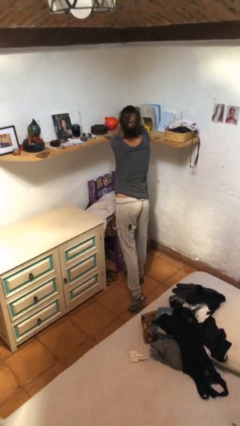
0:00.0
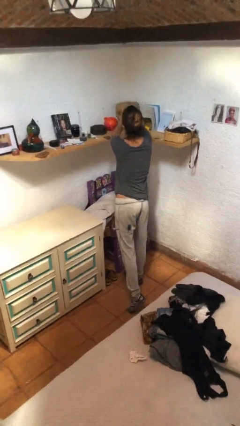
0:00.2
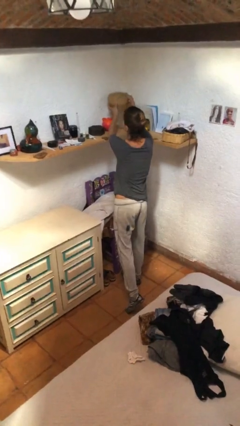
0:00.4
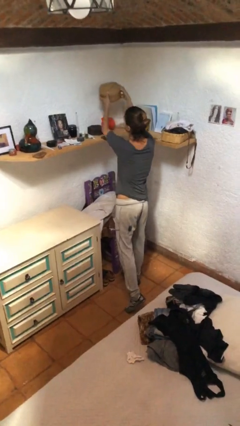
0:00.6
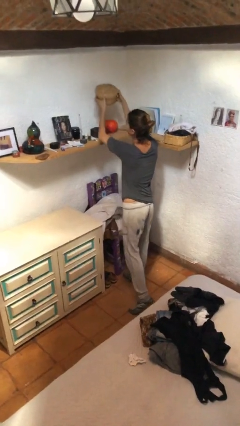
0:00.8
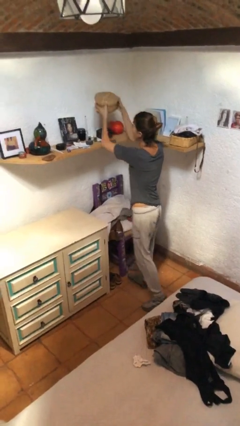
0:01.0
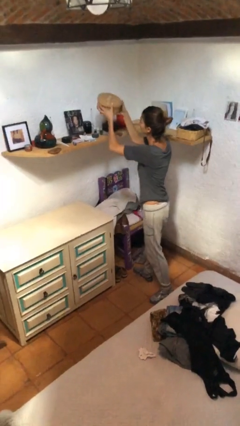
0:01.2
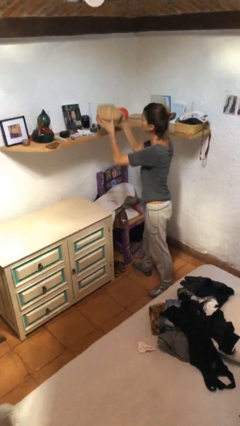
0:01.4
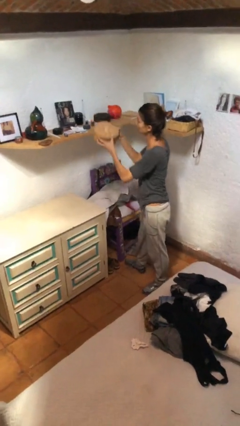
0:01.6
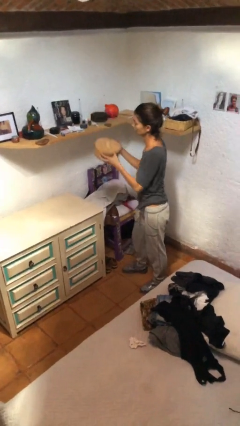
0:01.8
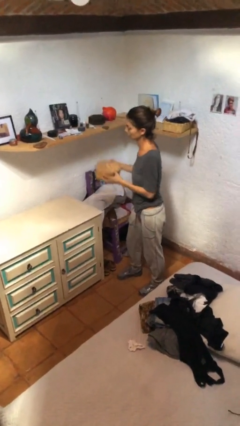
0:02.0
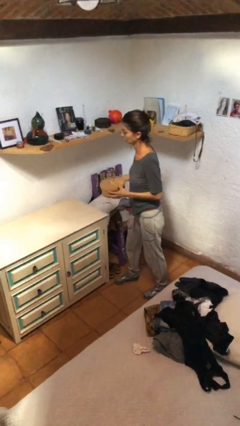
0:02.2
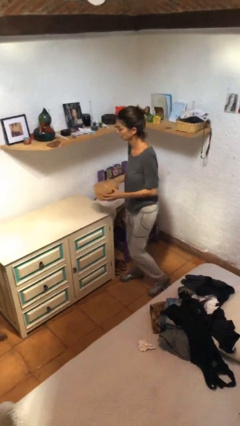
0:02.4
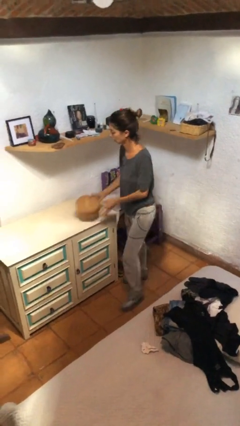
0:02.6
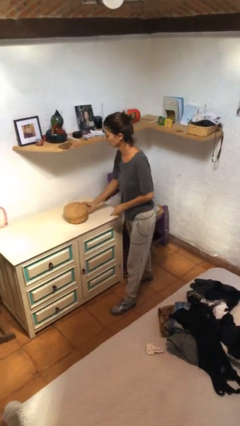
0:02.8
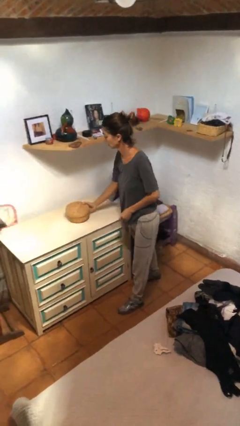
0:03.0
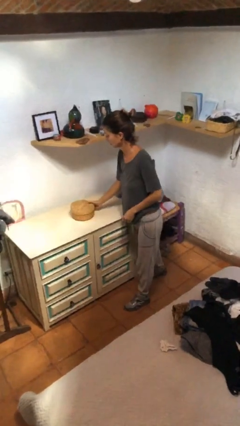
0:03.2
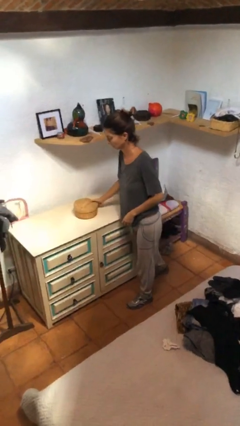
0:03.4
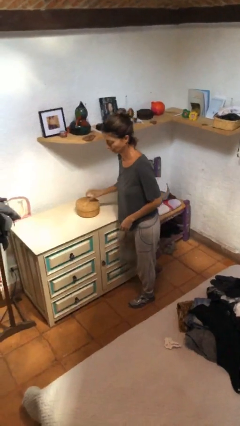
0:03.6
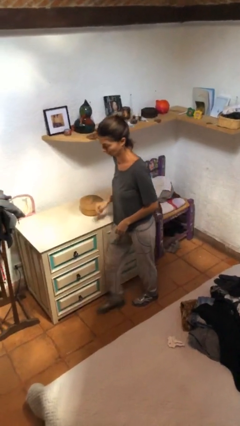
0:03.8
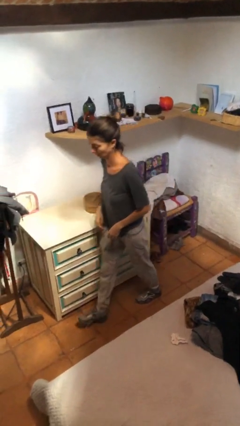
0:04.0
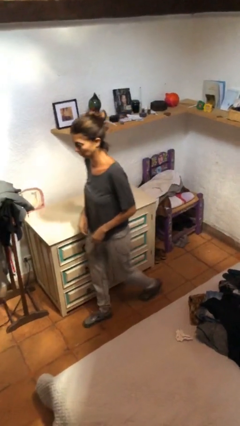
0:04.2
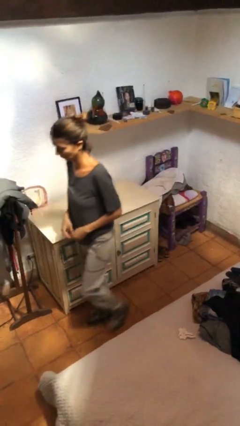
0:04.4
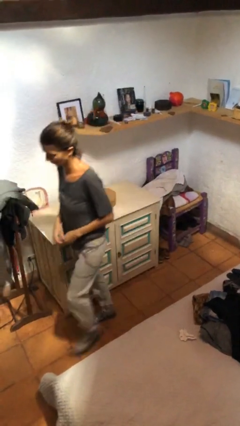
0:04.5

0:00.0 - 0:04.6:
person puts down object on table

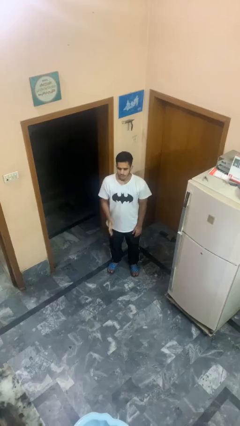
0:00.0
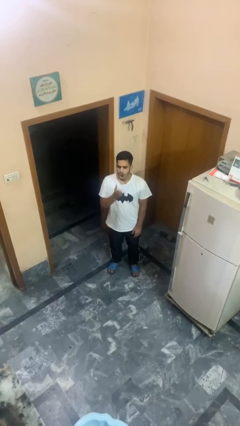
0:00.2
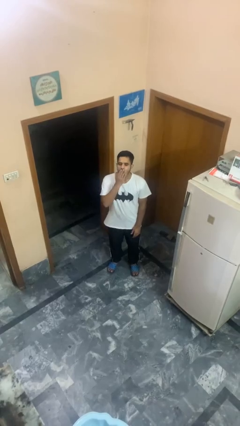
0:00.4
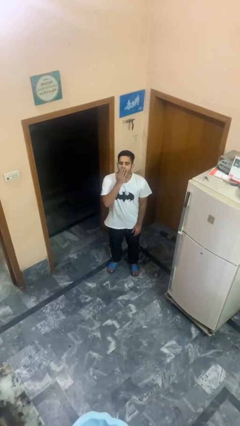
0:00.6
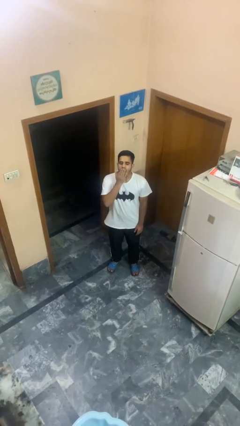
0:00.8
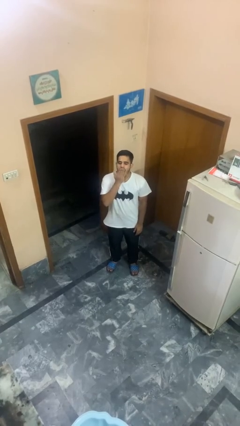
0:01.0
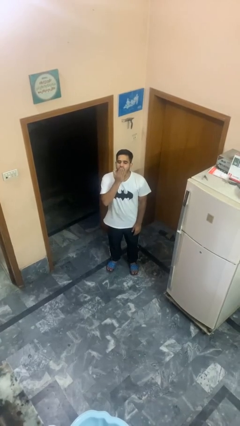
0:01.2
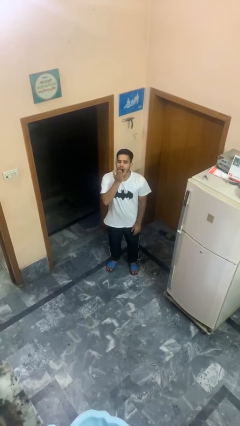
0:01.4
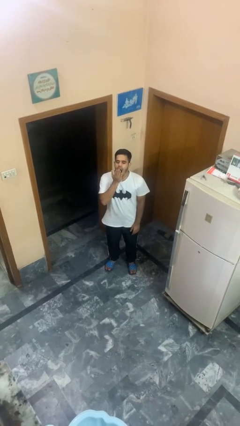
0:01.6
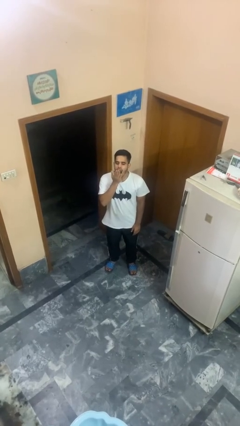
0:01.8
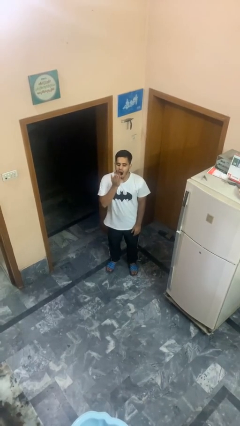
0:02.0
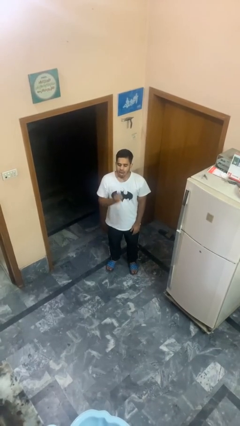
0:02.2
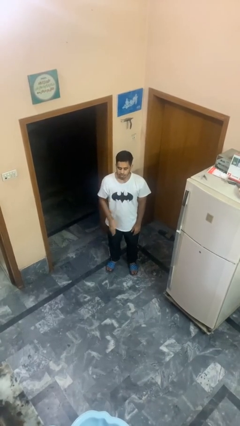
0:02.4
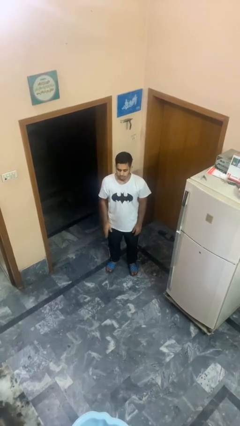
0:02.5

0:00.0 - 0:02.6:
person yawns

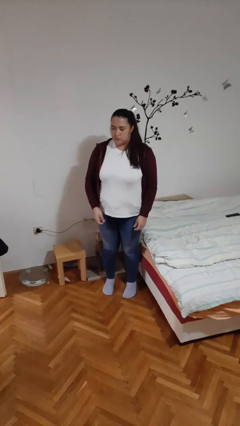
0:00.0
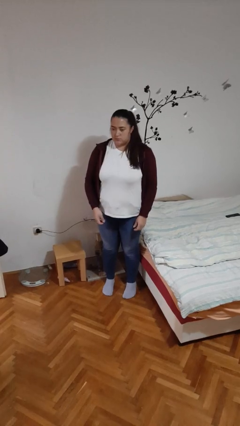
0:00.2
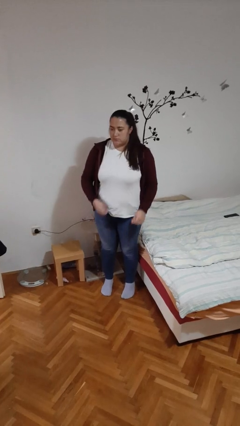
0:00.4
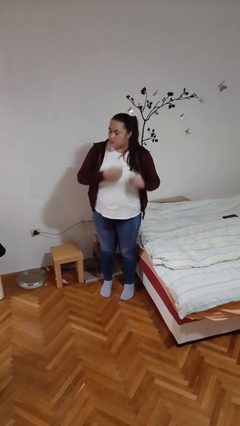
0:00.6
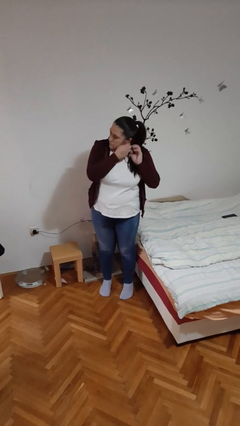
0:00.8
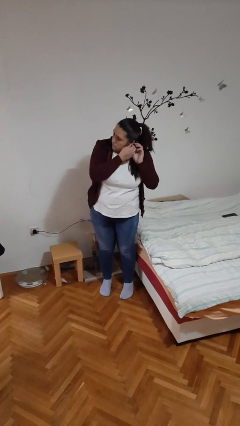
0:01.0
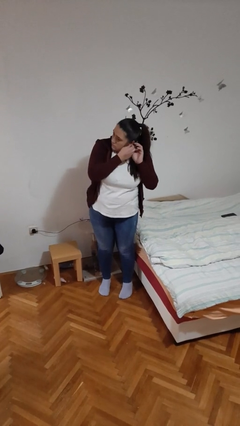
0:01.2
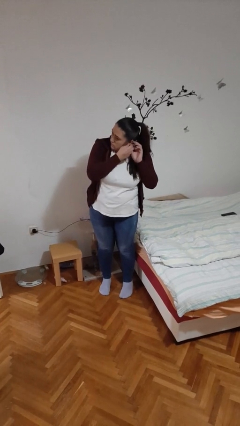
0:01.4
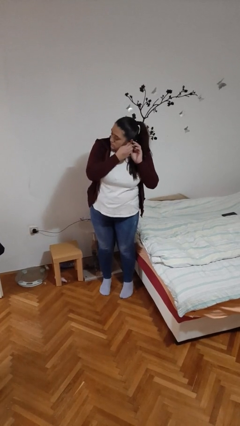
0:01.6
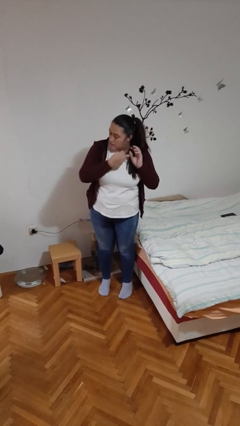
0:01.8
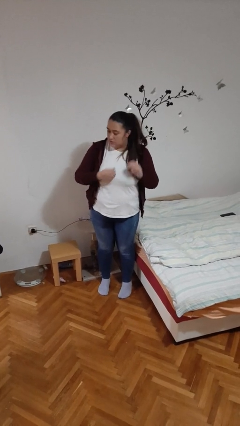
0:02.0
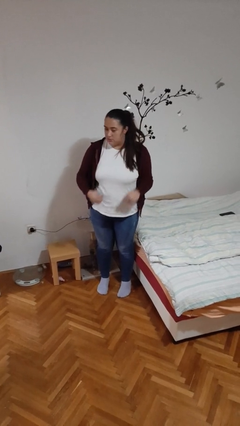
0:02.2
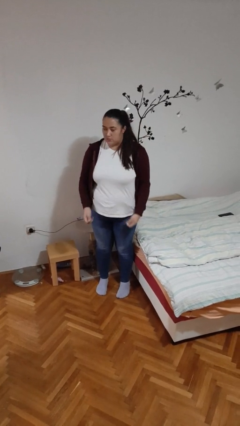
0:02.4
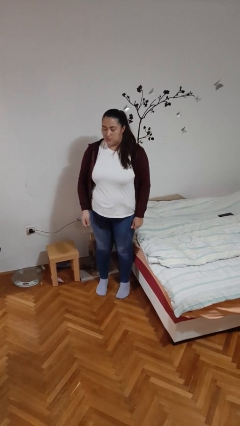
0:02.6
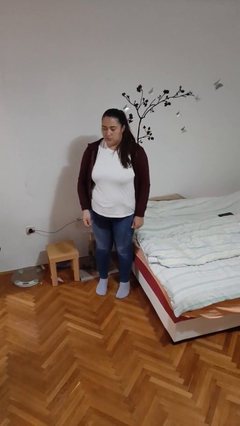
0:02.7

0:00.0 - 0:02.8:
person takes off earrings

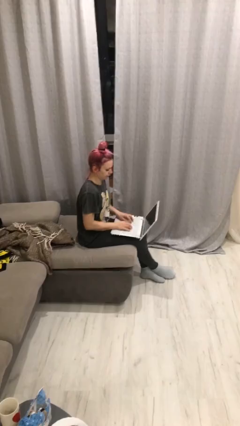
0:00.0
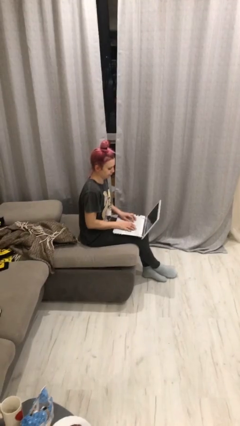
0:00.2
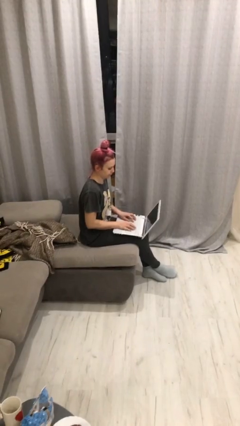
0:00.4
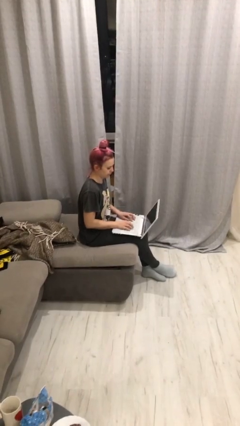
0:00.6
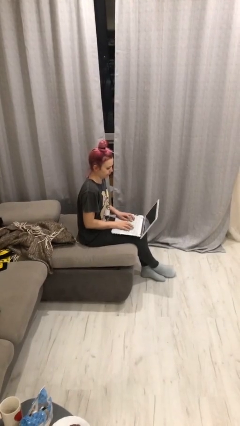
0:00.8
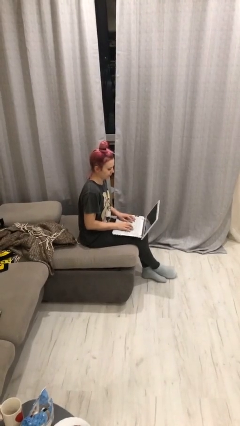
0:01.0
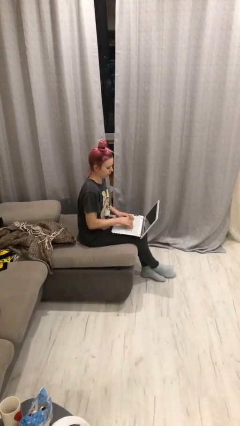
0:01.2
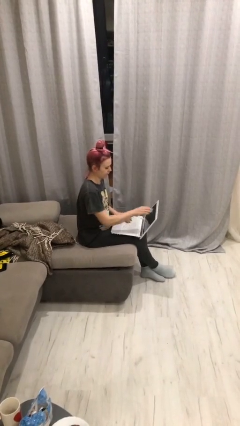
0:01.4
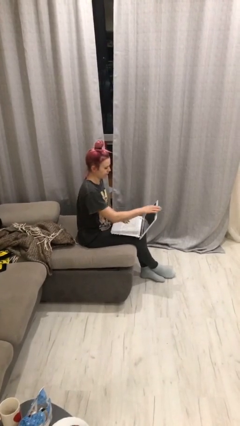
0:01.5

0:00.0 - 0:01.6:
person interacts with laptop

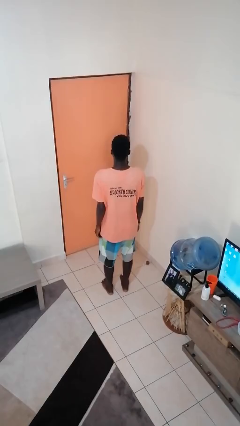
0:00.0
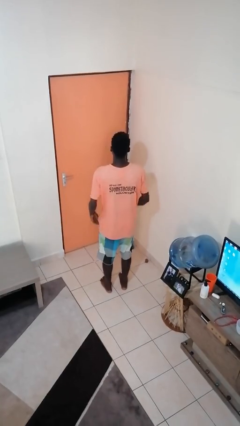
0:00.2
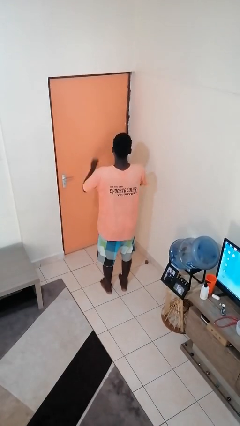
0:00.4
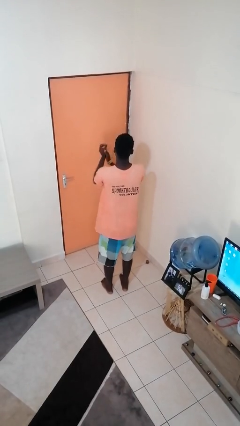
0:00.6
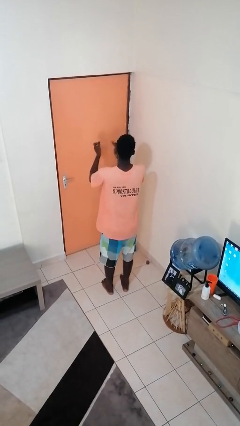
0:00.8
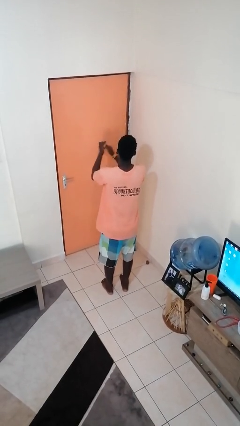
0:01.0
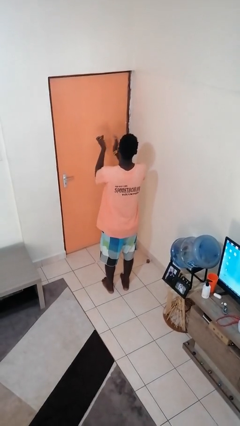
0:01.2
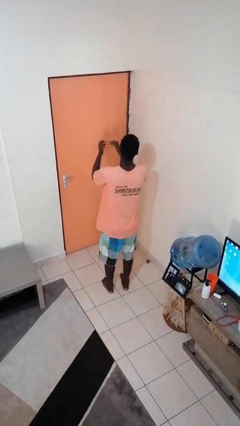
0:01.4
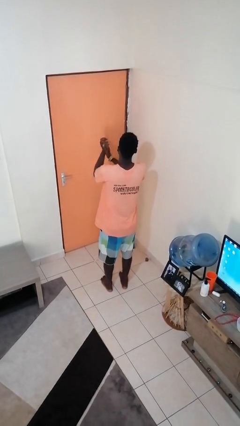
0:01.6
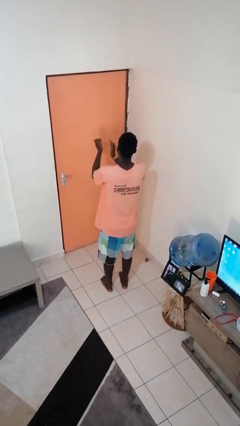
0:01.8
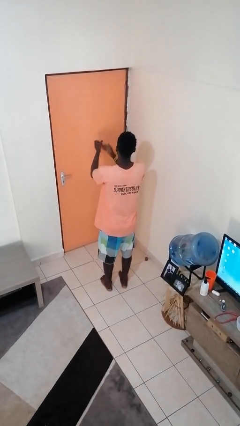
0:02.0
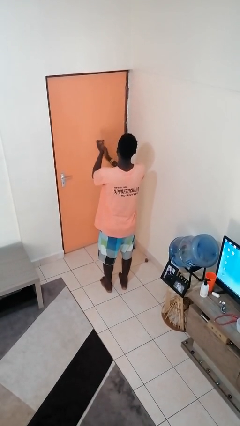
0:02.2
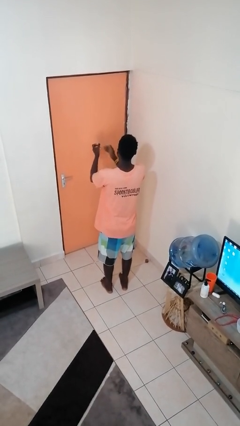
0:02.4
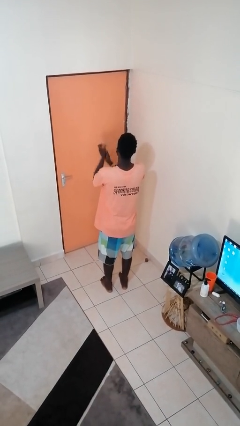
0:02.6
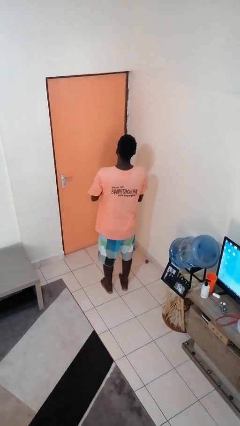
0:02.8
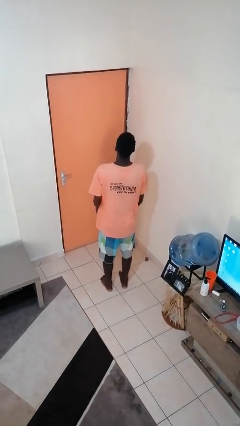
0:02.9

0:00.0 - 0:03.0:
person claps hands

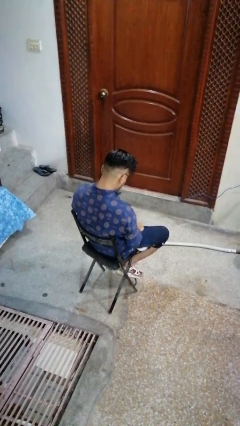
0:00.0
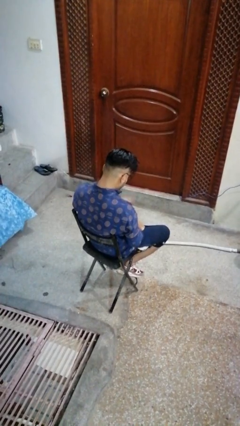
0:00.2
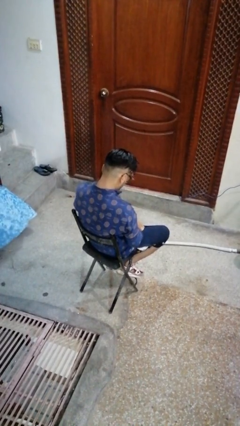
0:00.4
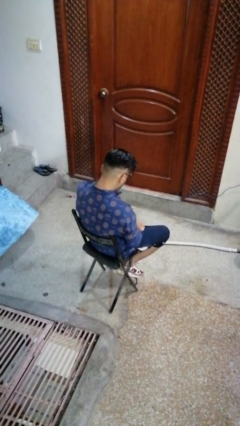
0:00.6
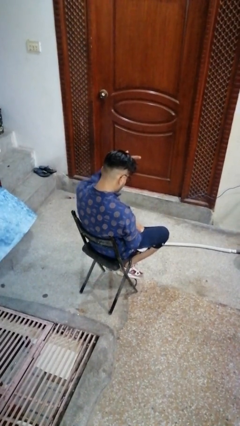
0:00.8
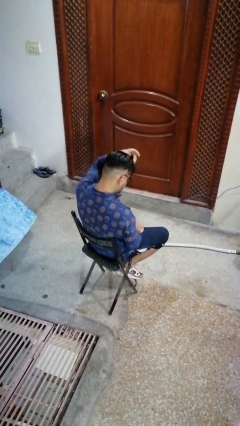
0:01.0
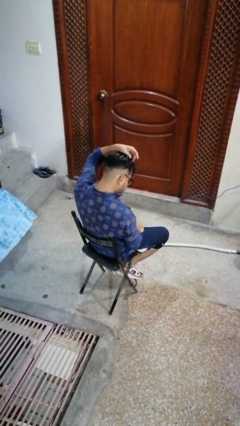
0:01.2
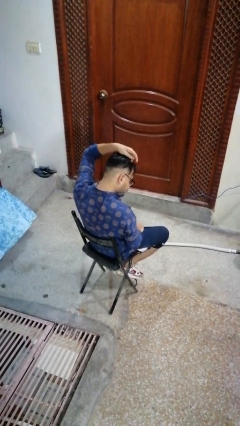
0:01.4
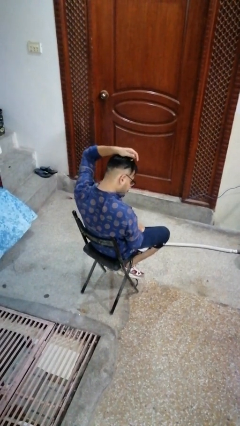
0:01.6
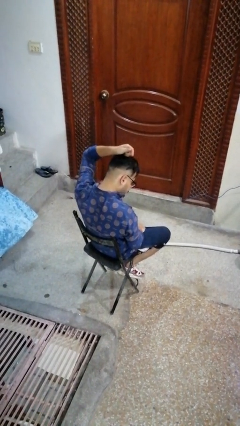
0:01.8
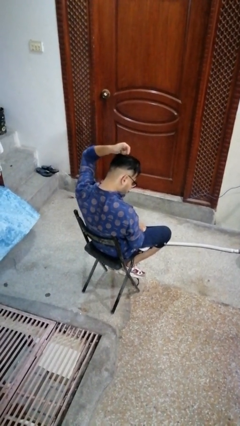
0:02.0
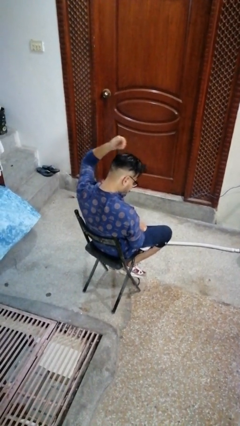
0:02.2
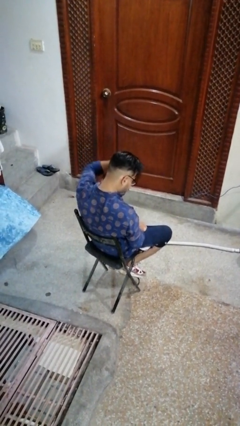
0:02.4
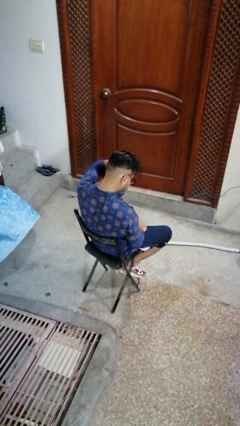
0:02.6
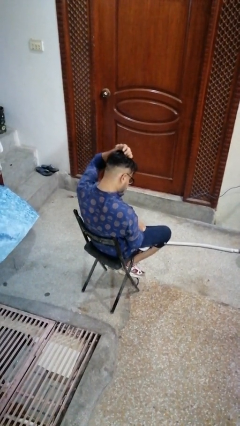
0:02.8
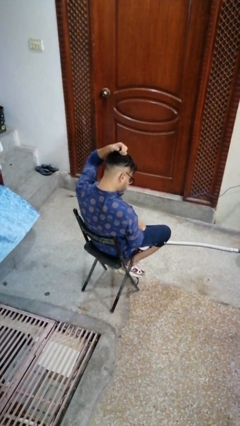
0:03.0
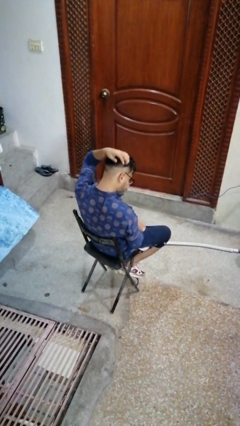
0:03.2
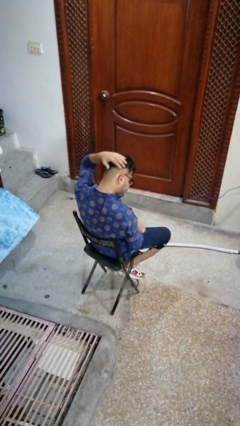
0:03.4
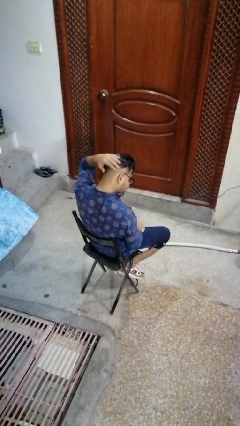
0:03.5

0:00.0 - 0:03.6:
person strokes hair
